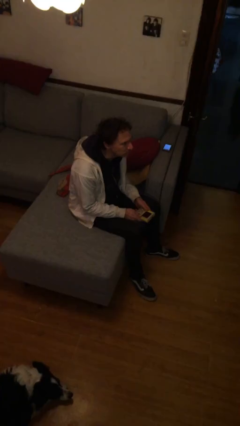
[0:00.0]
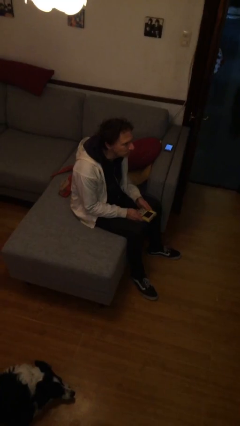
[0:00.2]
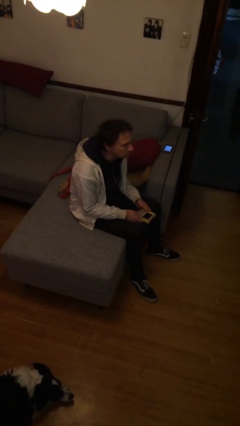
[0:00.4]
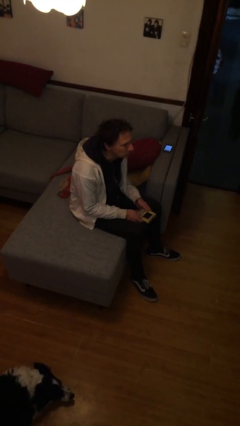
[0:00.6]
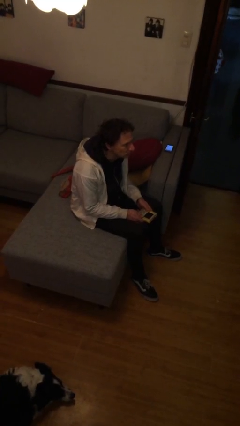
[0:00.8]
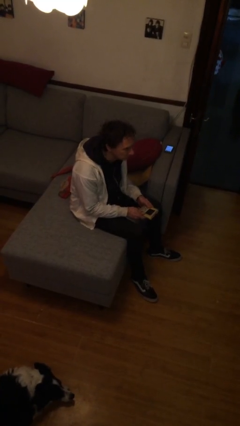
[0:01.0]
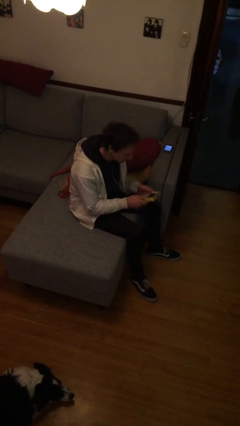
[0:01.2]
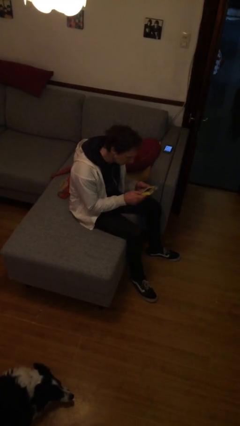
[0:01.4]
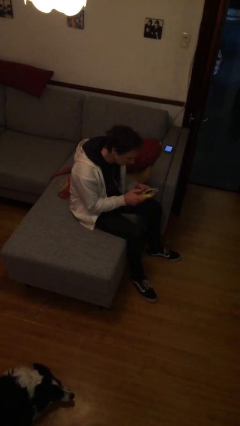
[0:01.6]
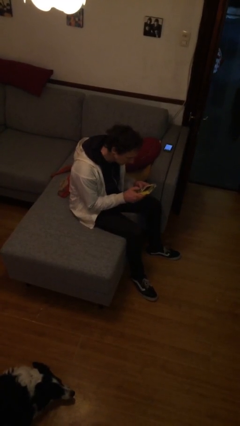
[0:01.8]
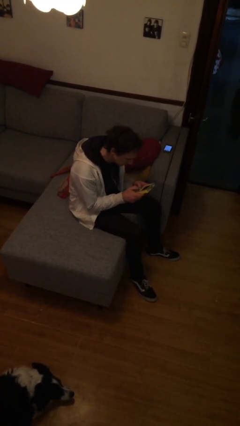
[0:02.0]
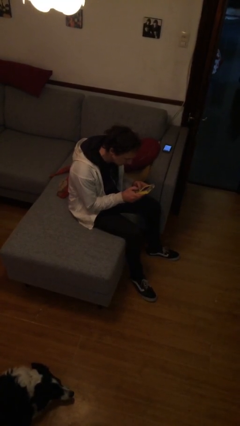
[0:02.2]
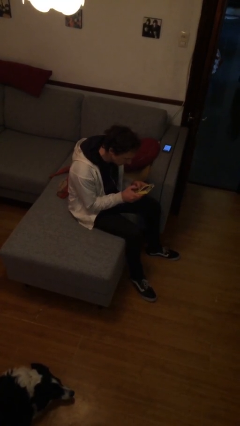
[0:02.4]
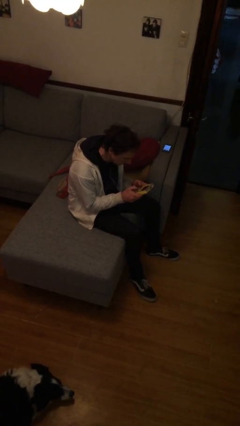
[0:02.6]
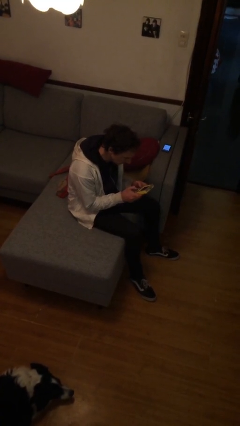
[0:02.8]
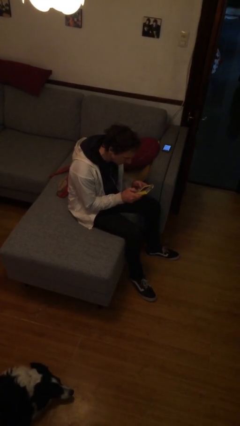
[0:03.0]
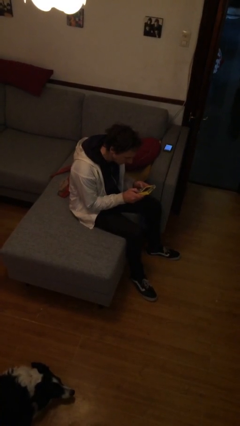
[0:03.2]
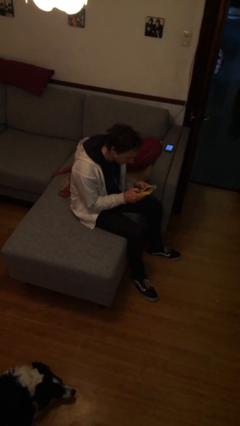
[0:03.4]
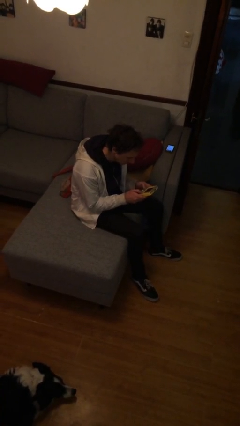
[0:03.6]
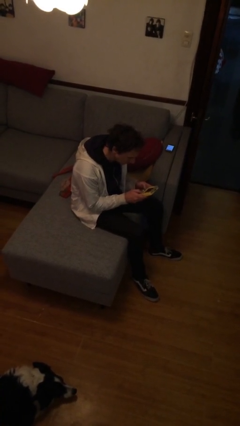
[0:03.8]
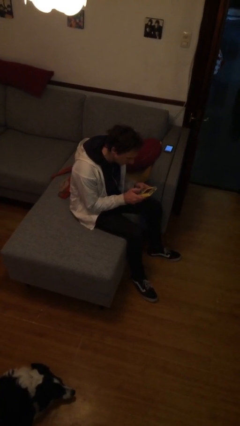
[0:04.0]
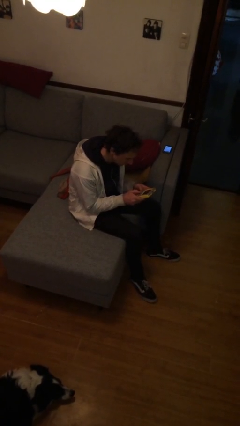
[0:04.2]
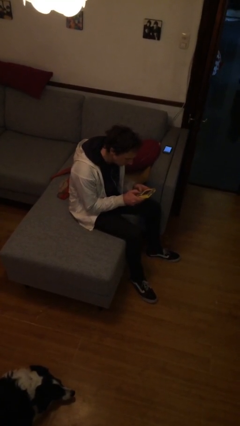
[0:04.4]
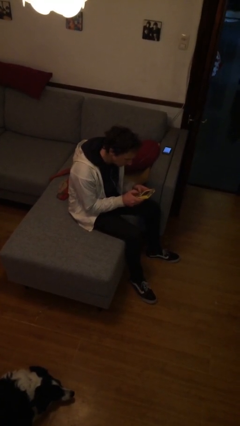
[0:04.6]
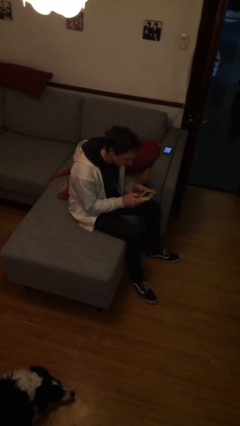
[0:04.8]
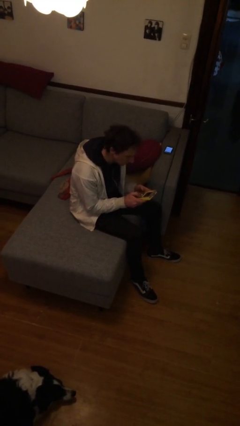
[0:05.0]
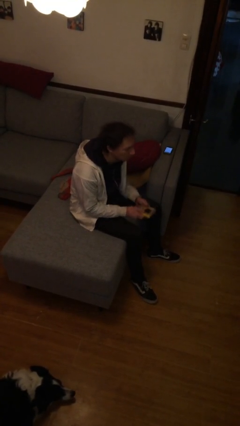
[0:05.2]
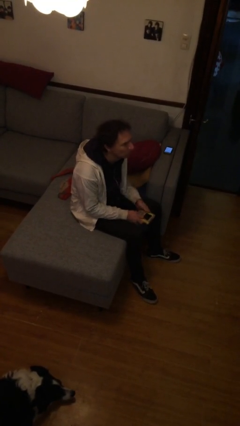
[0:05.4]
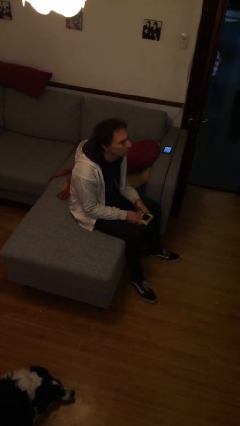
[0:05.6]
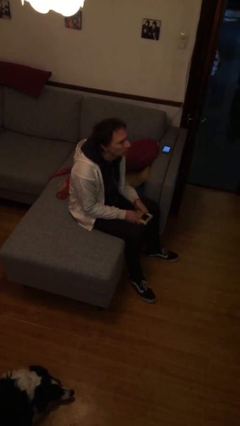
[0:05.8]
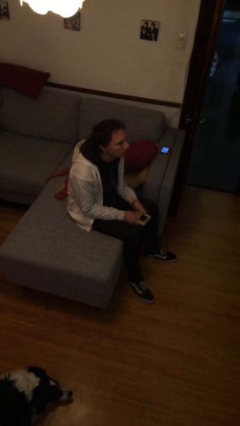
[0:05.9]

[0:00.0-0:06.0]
person interacts with handheld game

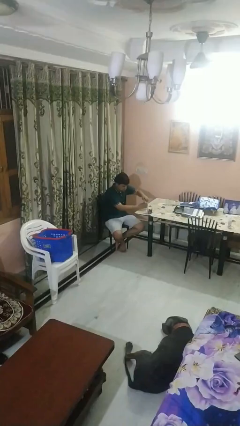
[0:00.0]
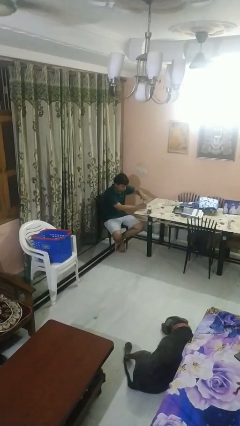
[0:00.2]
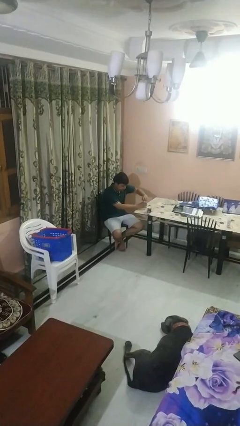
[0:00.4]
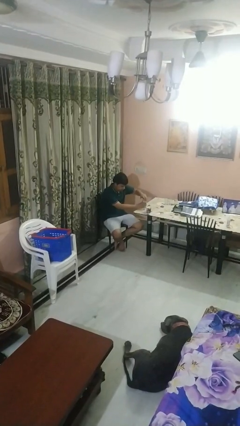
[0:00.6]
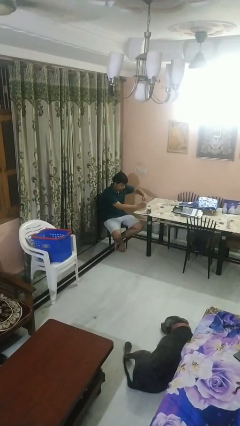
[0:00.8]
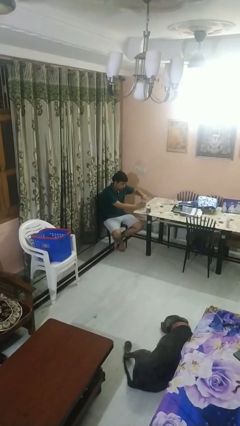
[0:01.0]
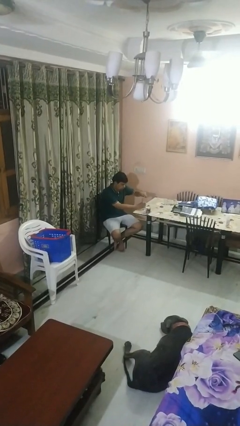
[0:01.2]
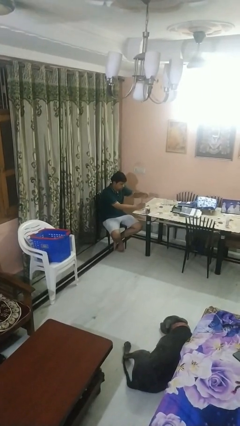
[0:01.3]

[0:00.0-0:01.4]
person unscrews lid from bottle

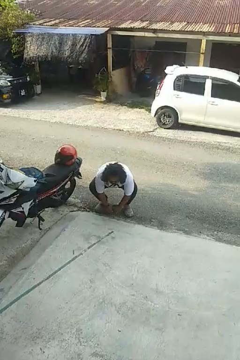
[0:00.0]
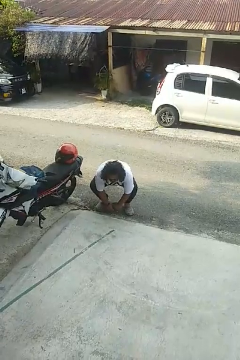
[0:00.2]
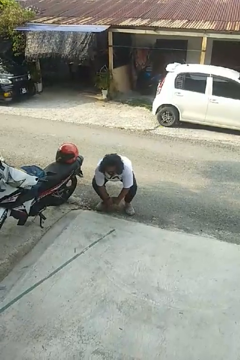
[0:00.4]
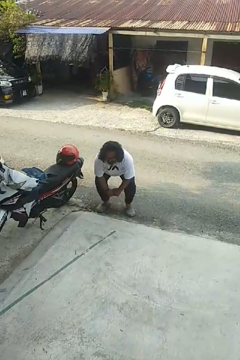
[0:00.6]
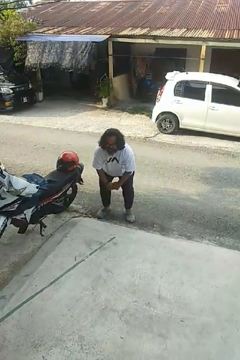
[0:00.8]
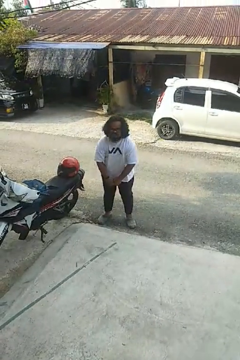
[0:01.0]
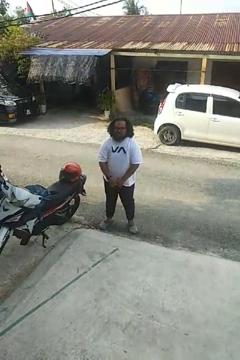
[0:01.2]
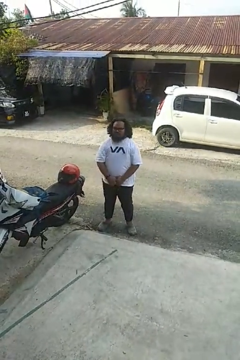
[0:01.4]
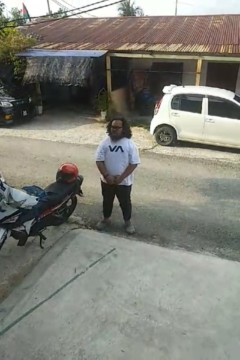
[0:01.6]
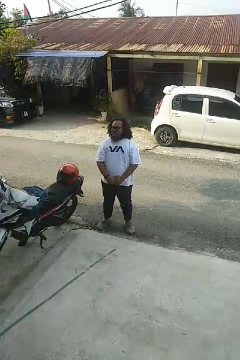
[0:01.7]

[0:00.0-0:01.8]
person stands up

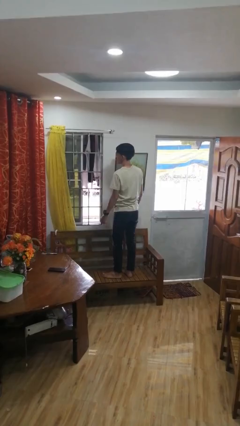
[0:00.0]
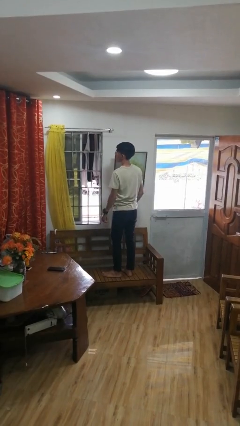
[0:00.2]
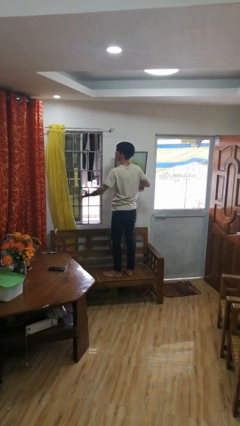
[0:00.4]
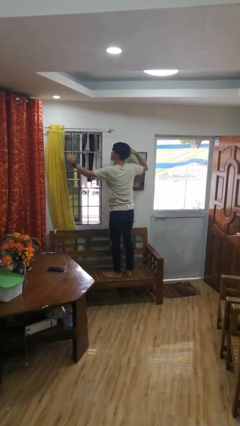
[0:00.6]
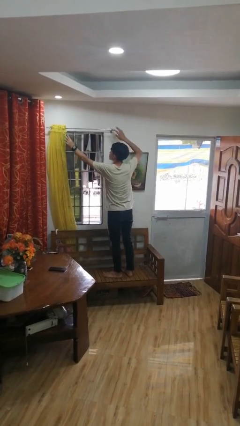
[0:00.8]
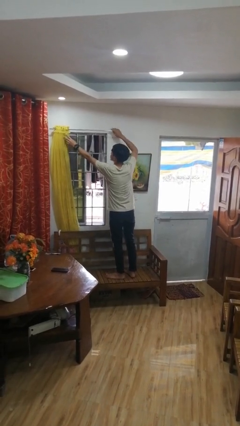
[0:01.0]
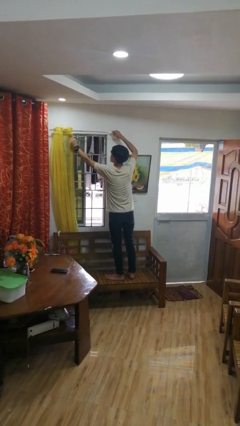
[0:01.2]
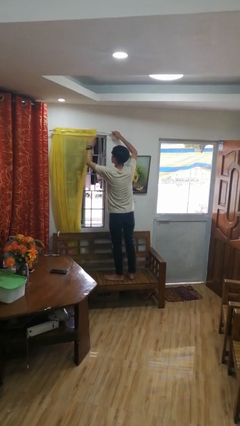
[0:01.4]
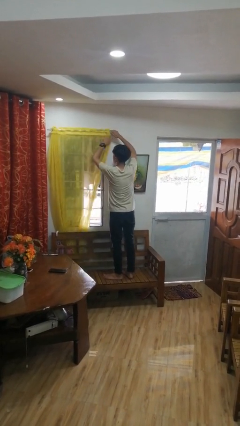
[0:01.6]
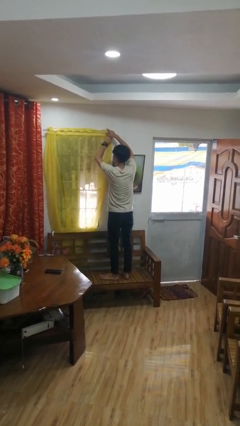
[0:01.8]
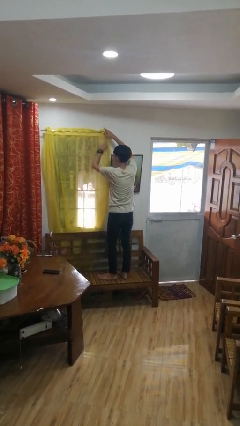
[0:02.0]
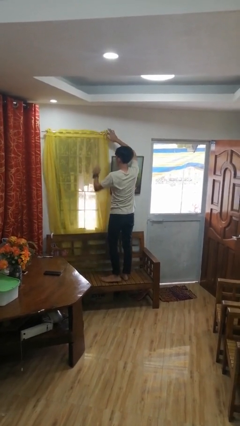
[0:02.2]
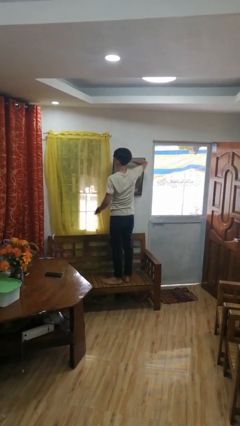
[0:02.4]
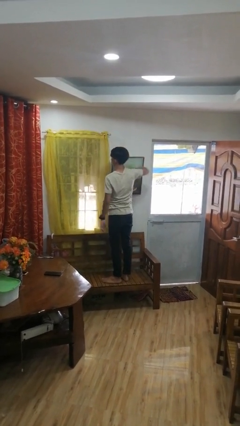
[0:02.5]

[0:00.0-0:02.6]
person closes curtains

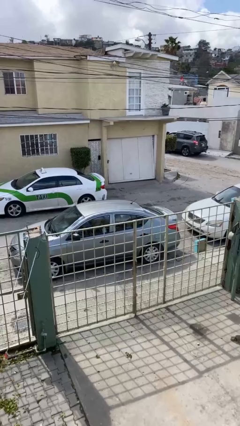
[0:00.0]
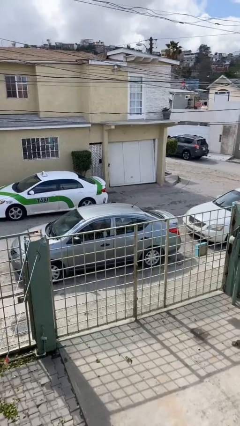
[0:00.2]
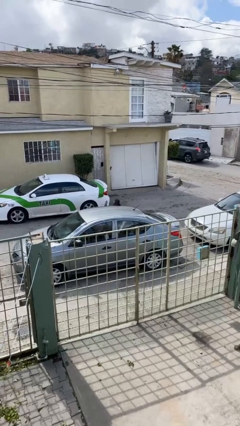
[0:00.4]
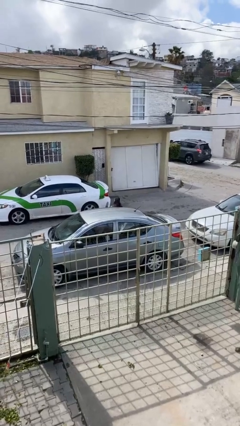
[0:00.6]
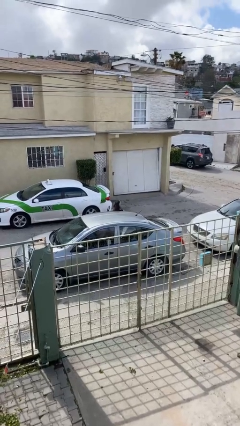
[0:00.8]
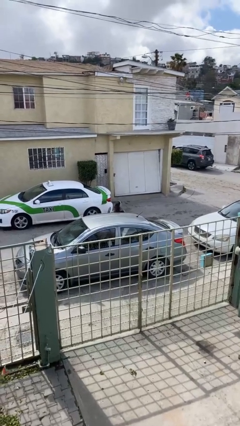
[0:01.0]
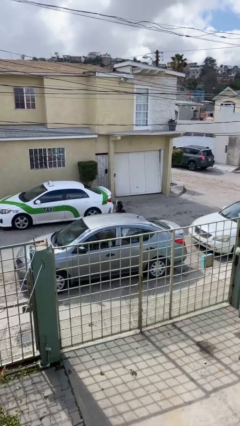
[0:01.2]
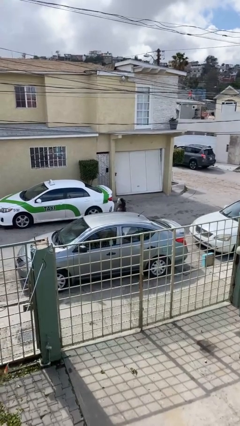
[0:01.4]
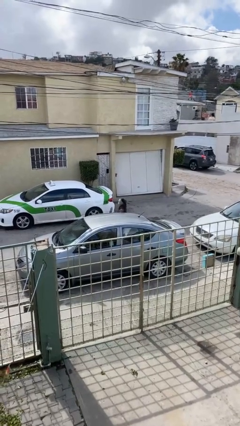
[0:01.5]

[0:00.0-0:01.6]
person exits car

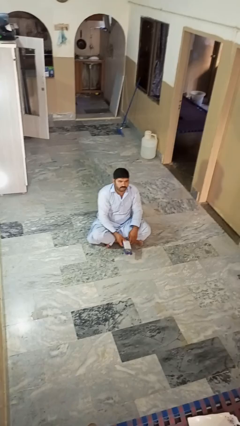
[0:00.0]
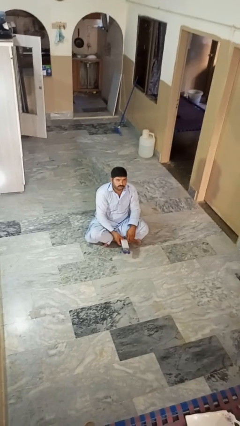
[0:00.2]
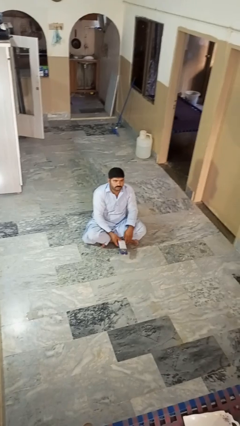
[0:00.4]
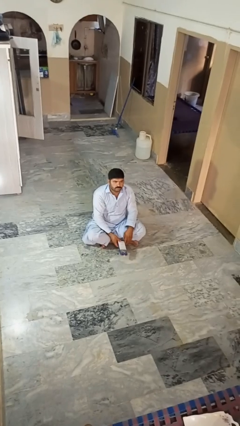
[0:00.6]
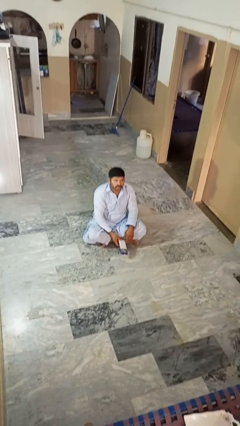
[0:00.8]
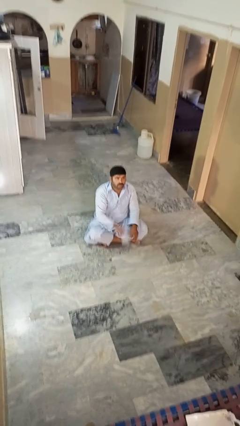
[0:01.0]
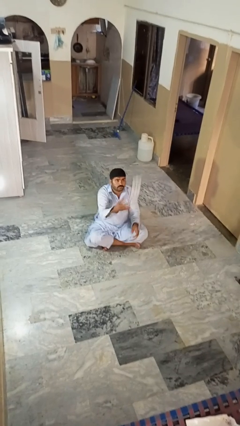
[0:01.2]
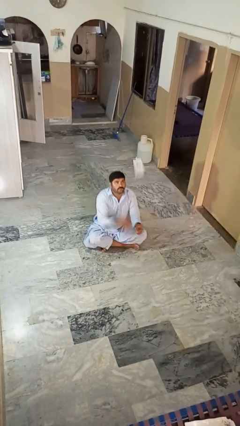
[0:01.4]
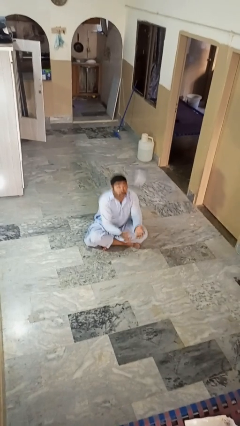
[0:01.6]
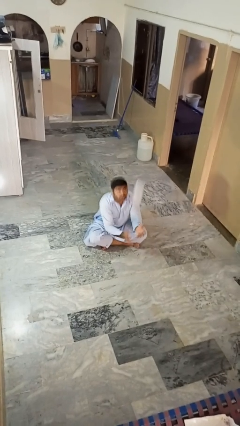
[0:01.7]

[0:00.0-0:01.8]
person drops object

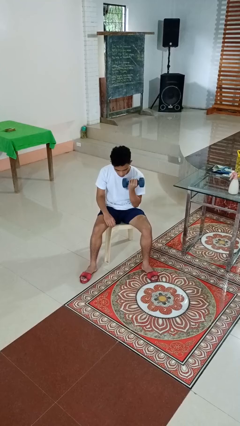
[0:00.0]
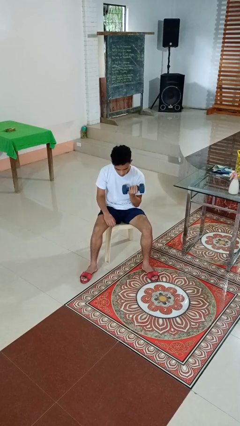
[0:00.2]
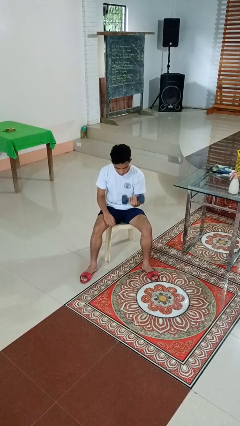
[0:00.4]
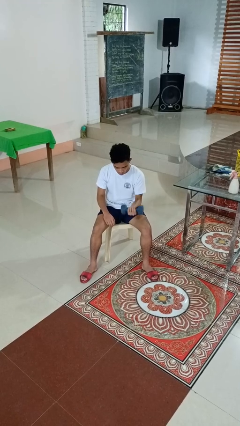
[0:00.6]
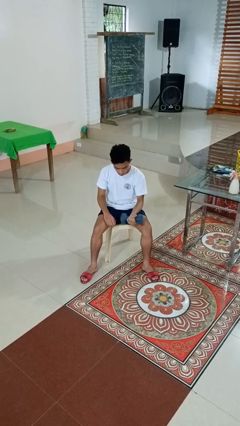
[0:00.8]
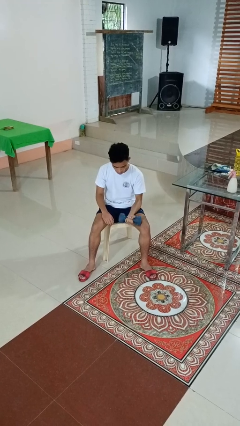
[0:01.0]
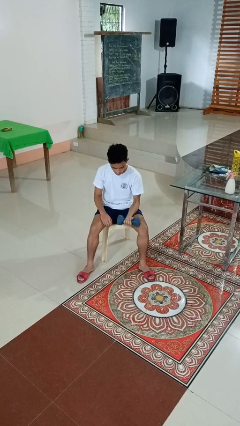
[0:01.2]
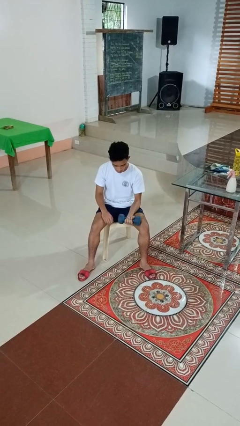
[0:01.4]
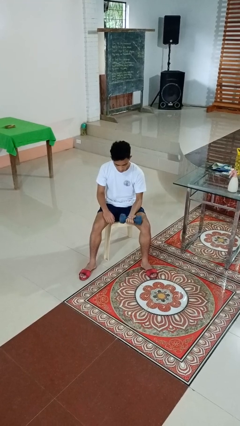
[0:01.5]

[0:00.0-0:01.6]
person lifts dumbbells

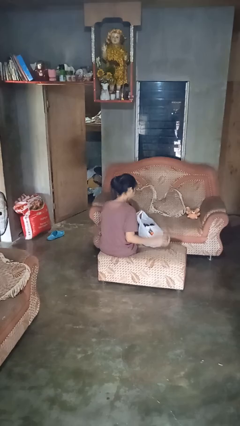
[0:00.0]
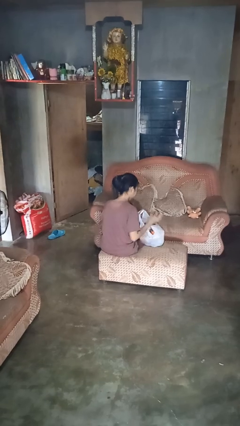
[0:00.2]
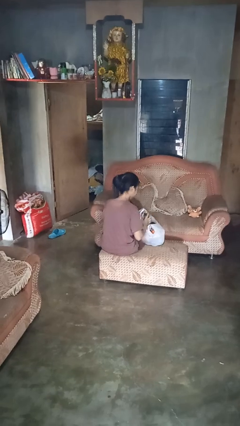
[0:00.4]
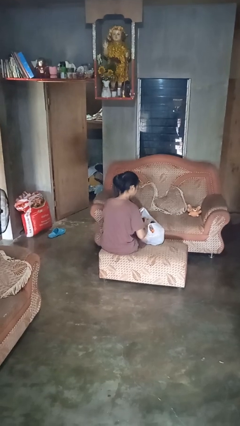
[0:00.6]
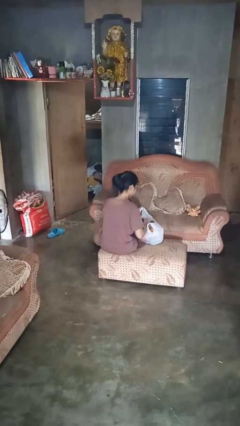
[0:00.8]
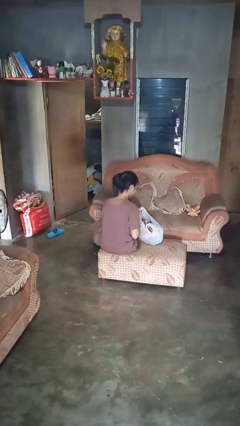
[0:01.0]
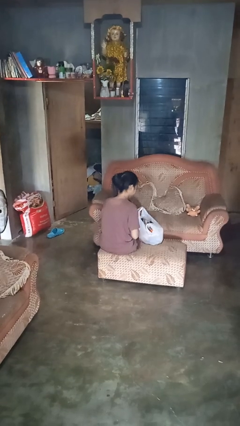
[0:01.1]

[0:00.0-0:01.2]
person puts object into bag
